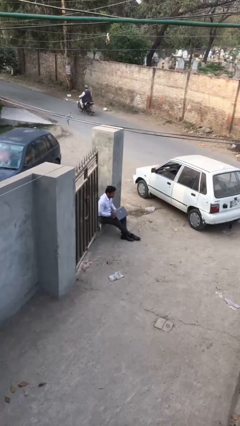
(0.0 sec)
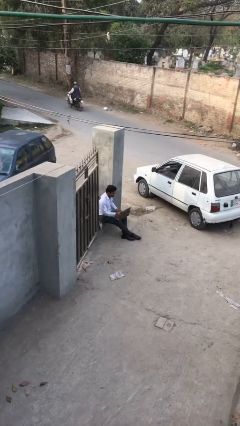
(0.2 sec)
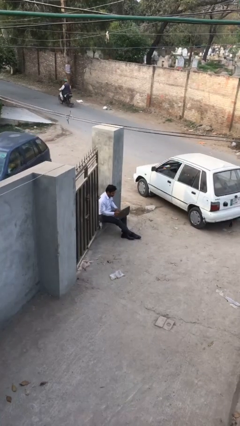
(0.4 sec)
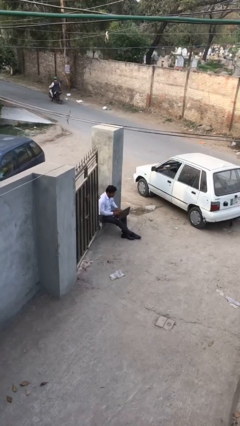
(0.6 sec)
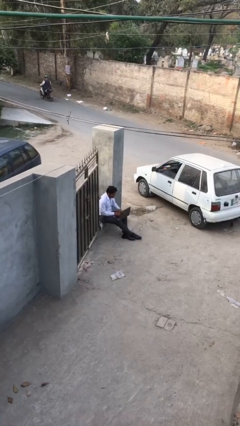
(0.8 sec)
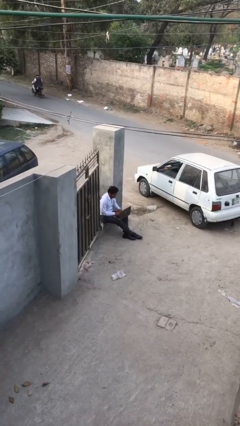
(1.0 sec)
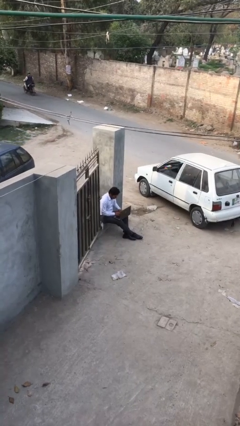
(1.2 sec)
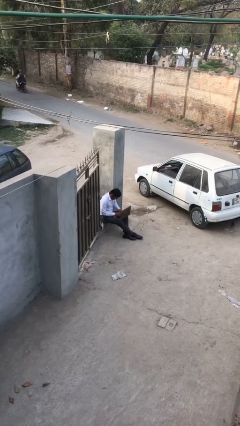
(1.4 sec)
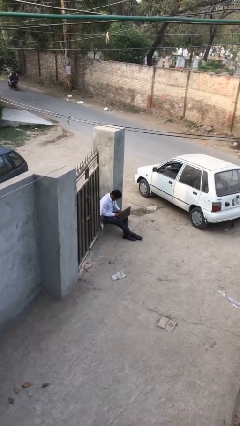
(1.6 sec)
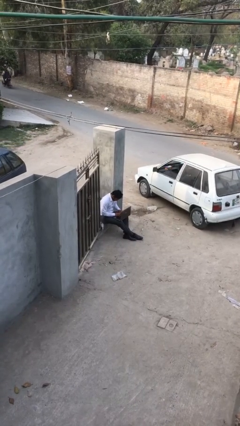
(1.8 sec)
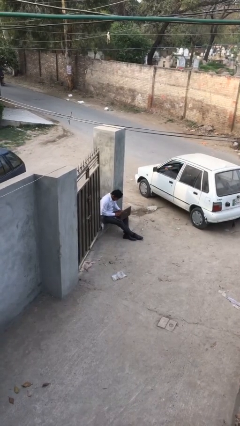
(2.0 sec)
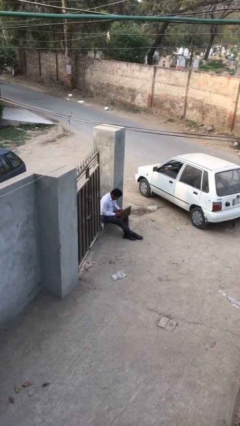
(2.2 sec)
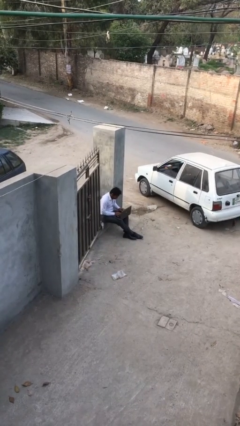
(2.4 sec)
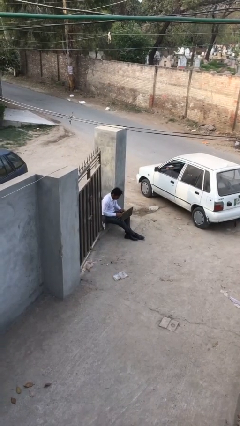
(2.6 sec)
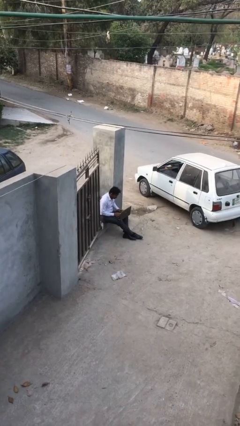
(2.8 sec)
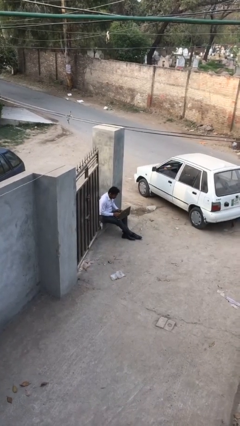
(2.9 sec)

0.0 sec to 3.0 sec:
person interacts with laptop

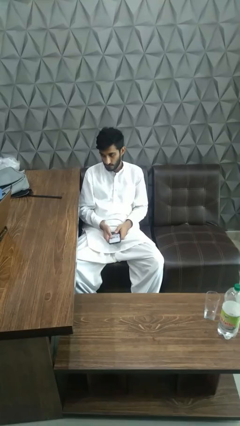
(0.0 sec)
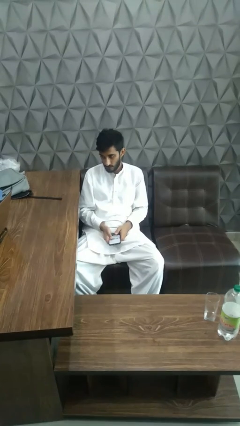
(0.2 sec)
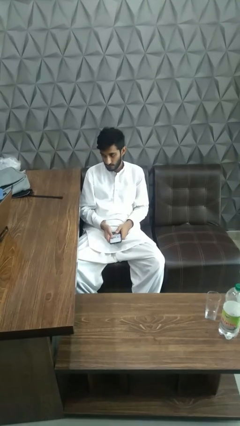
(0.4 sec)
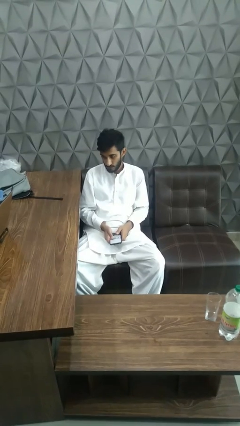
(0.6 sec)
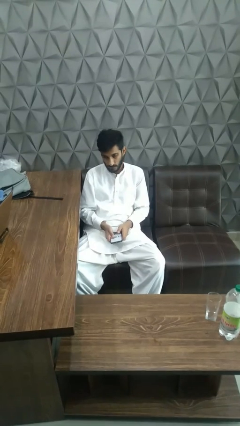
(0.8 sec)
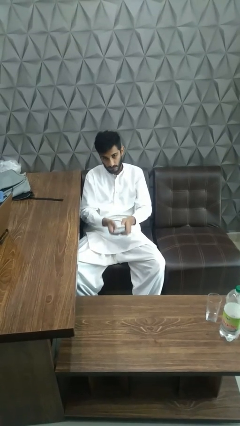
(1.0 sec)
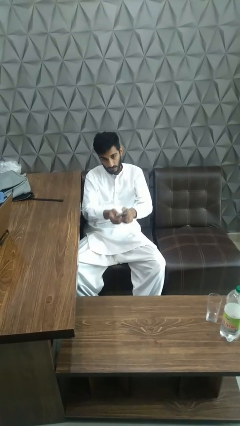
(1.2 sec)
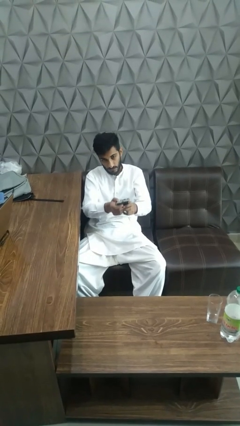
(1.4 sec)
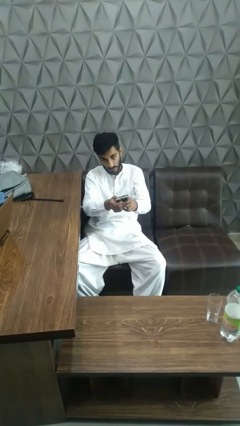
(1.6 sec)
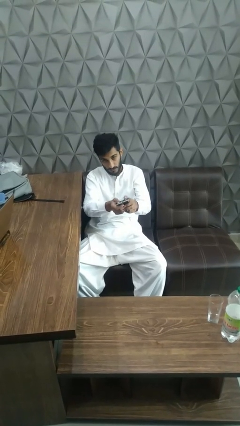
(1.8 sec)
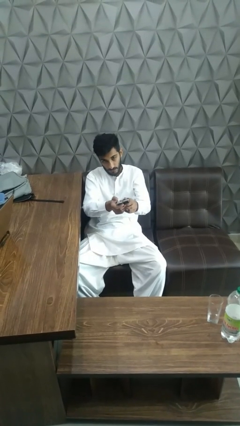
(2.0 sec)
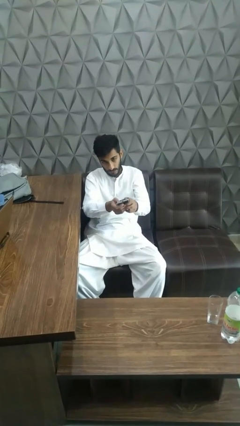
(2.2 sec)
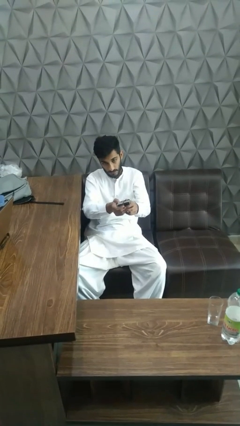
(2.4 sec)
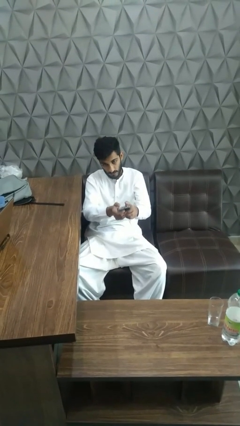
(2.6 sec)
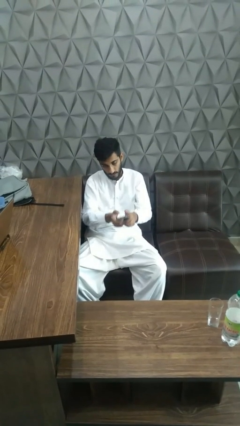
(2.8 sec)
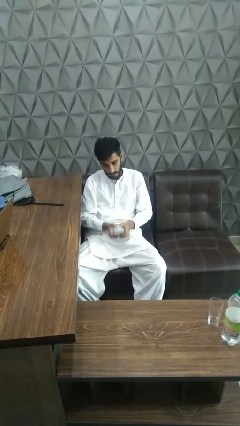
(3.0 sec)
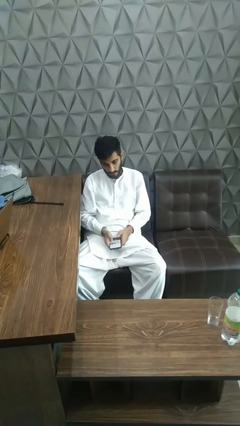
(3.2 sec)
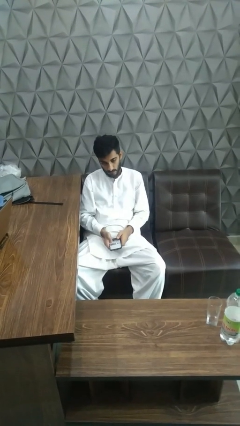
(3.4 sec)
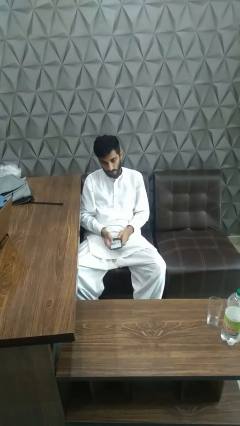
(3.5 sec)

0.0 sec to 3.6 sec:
person uses television remote

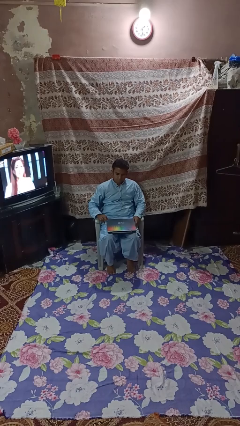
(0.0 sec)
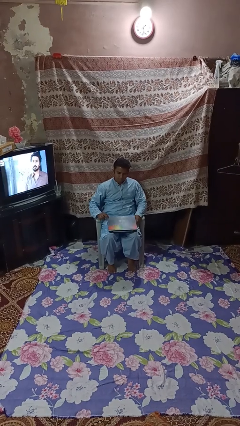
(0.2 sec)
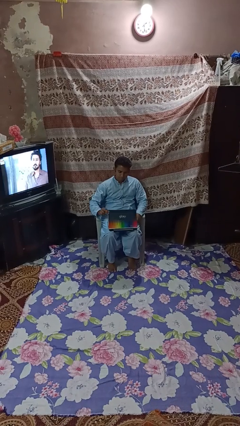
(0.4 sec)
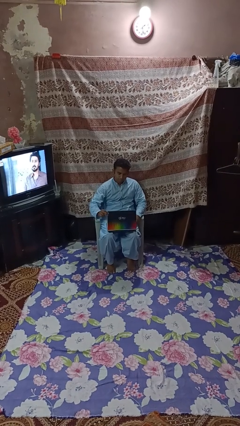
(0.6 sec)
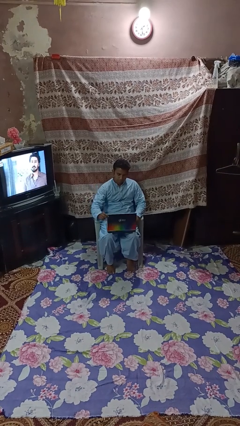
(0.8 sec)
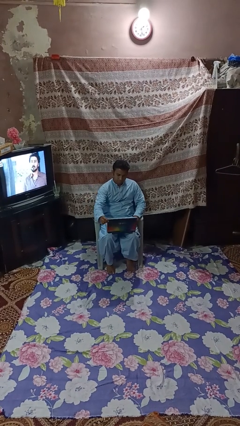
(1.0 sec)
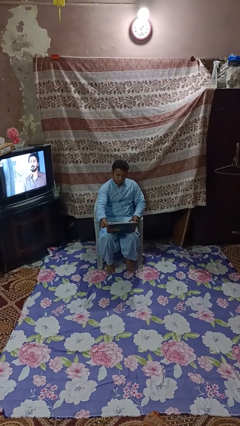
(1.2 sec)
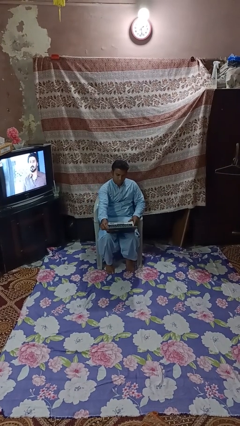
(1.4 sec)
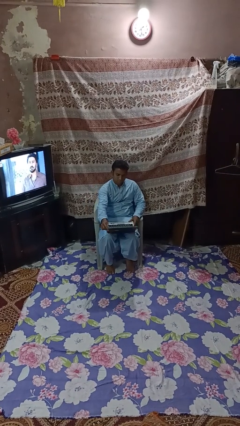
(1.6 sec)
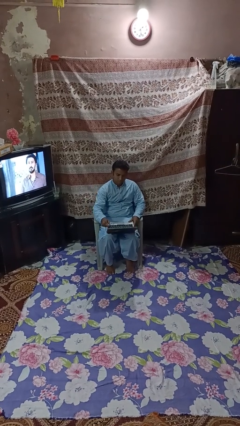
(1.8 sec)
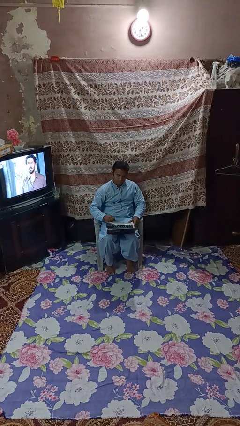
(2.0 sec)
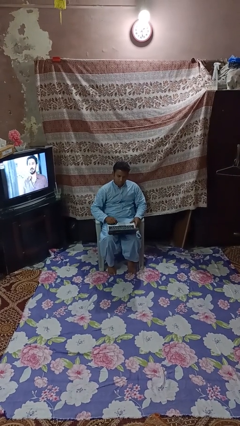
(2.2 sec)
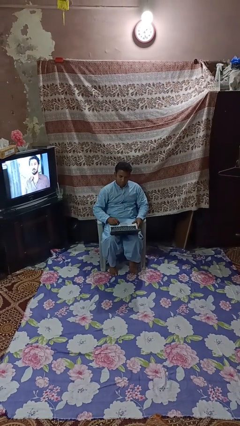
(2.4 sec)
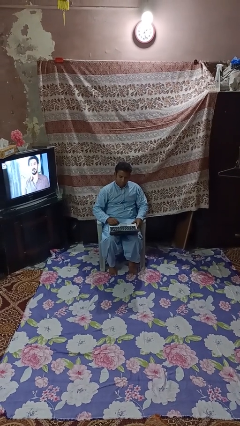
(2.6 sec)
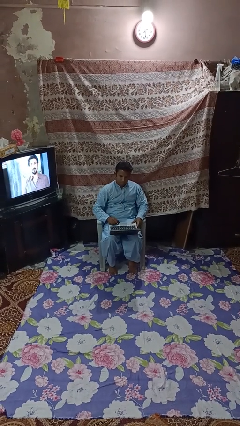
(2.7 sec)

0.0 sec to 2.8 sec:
person opens laptop

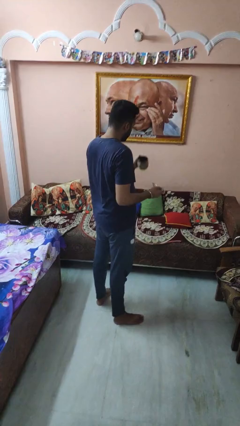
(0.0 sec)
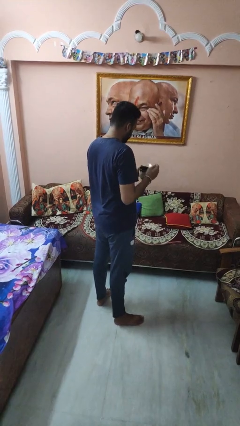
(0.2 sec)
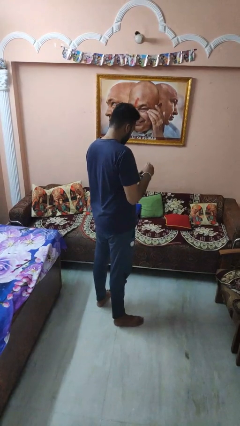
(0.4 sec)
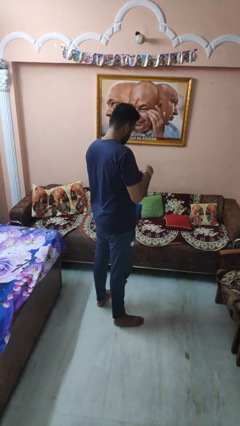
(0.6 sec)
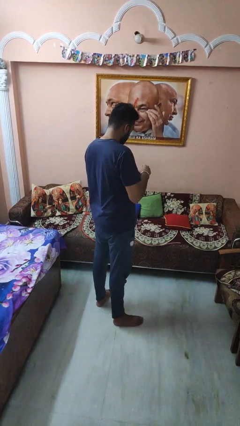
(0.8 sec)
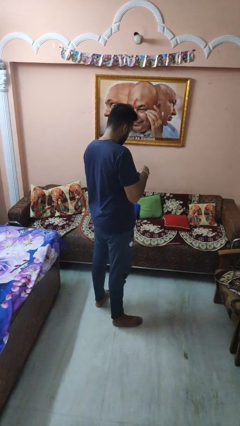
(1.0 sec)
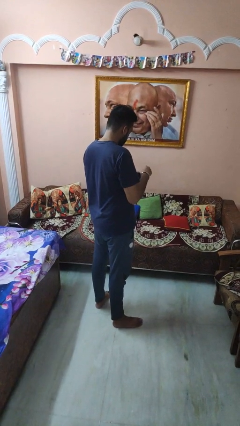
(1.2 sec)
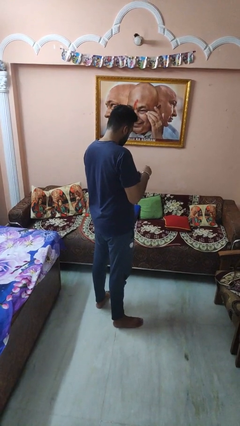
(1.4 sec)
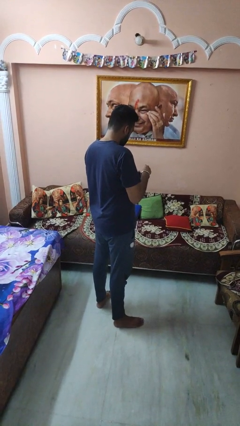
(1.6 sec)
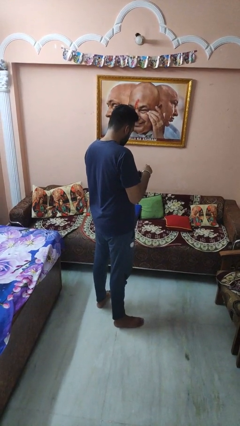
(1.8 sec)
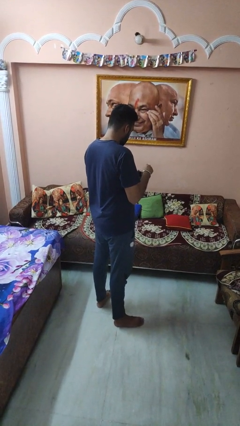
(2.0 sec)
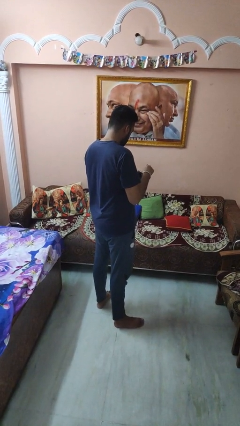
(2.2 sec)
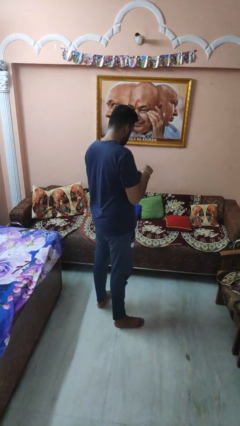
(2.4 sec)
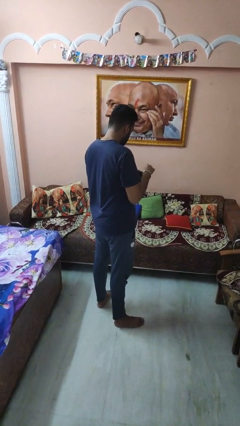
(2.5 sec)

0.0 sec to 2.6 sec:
person stirs mug

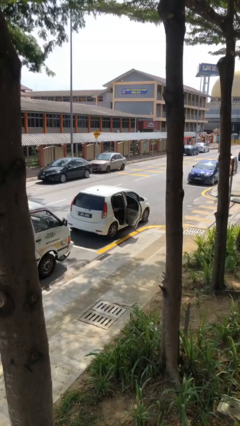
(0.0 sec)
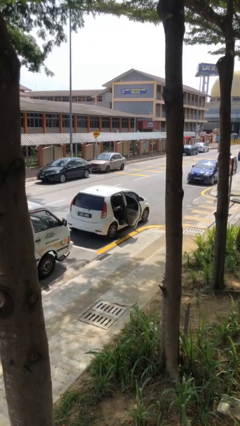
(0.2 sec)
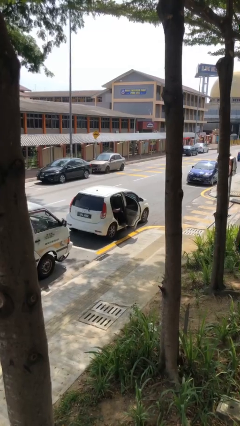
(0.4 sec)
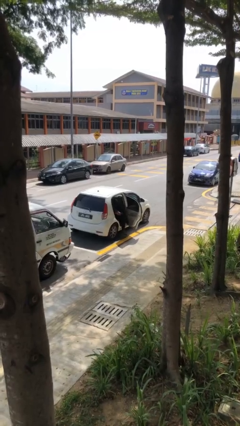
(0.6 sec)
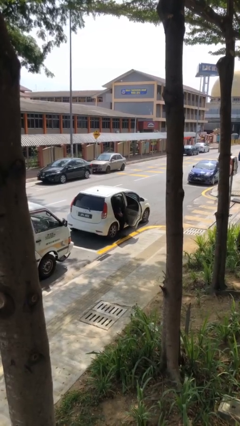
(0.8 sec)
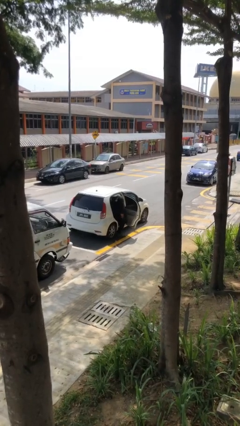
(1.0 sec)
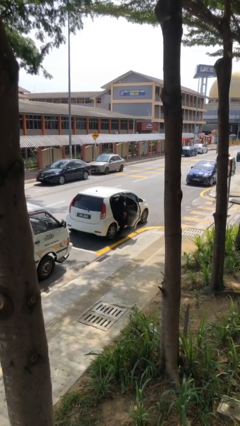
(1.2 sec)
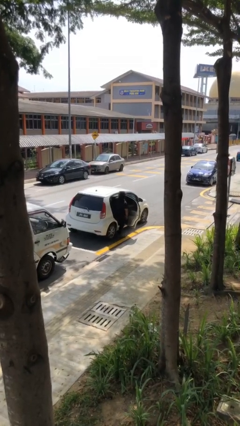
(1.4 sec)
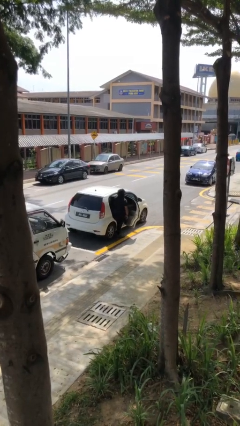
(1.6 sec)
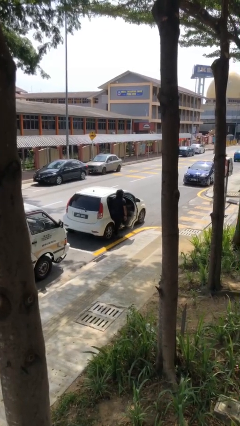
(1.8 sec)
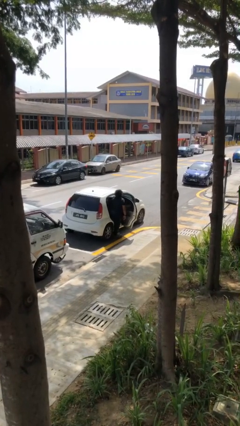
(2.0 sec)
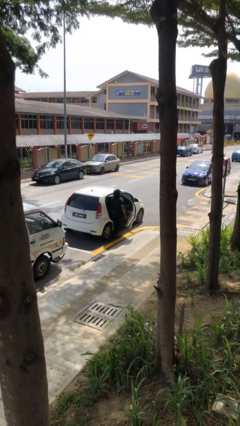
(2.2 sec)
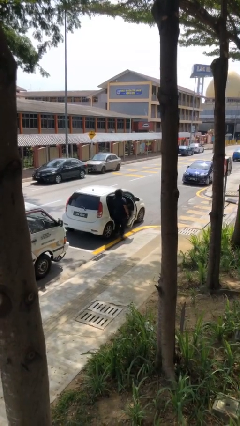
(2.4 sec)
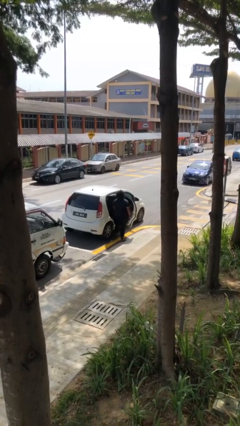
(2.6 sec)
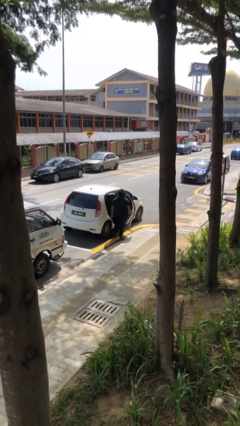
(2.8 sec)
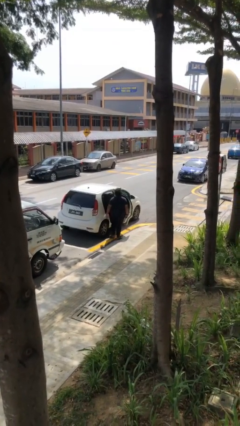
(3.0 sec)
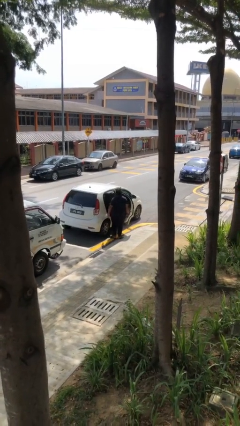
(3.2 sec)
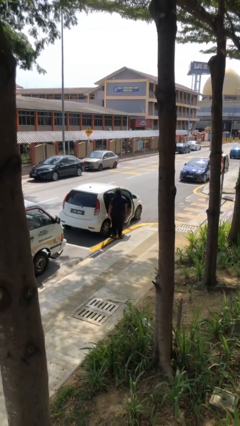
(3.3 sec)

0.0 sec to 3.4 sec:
person exits car

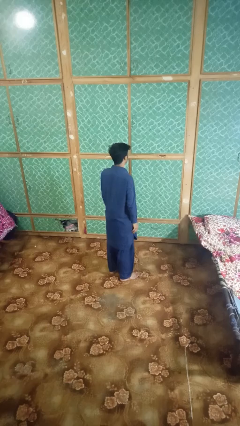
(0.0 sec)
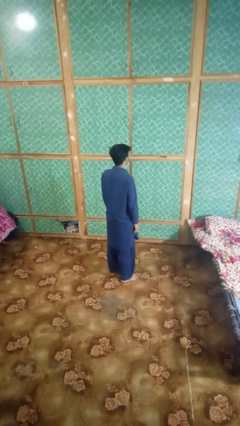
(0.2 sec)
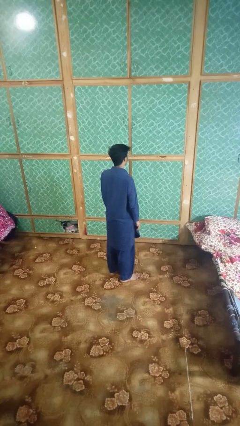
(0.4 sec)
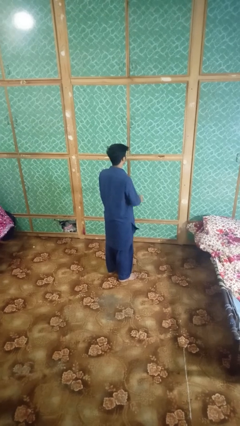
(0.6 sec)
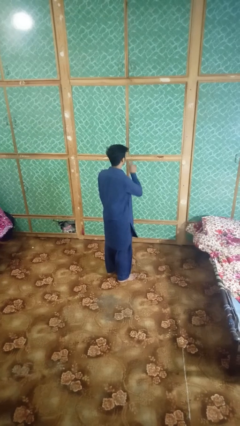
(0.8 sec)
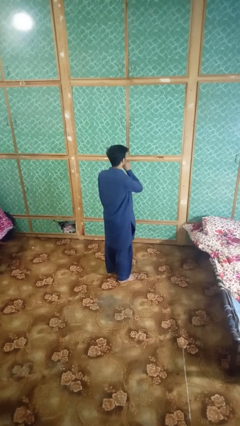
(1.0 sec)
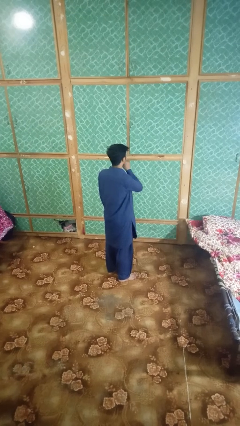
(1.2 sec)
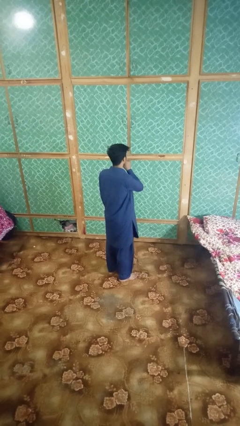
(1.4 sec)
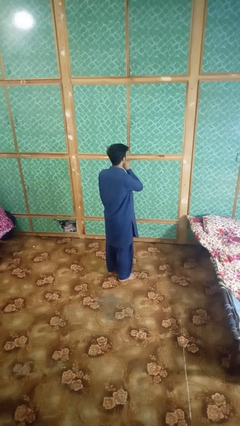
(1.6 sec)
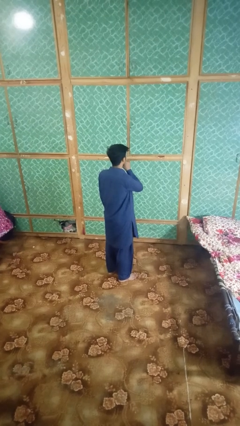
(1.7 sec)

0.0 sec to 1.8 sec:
person gestures be quiet

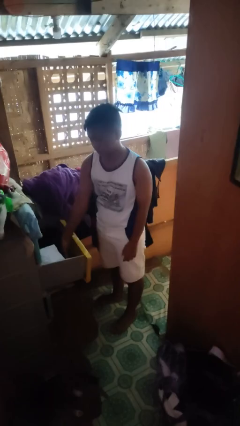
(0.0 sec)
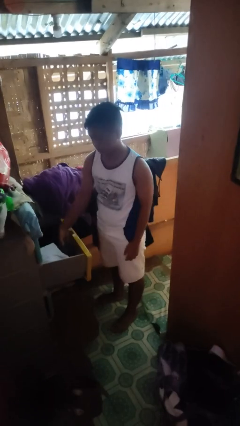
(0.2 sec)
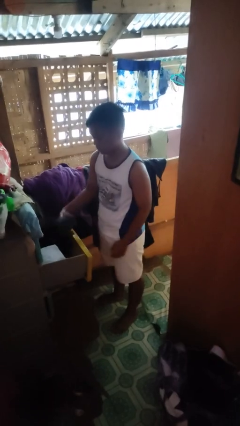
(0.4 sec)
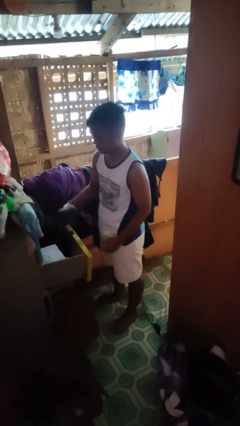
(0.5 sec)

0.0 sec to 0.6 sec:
person takes clothes from dresser
